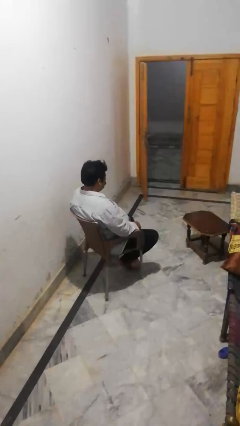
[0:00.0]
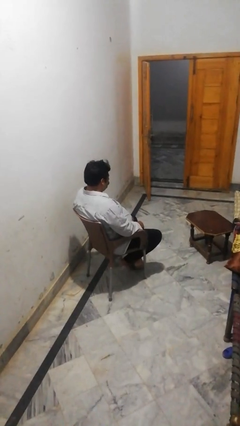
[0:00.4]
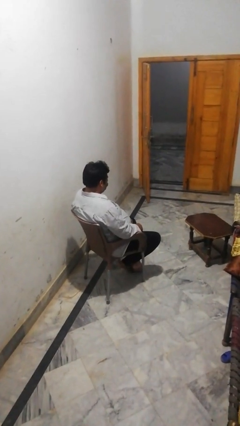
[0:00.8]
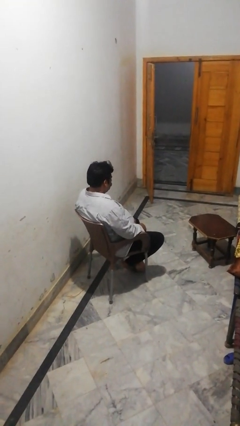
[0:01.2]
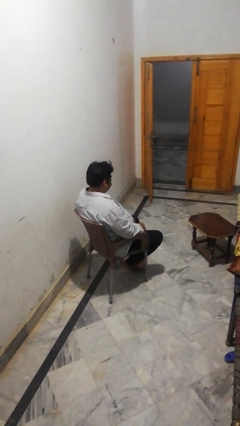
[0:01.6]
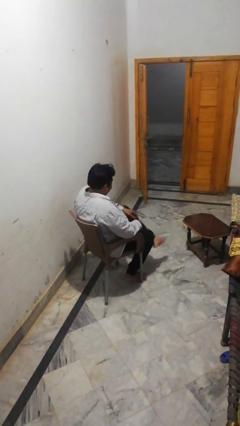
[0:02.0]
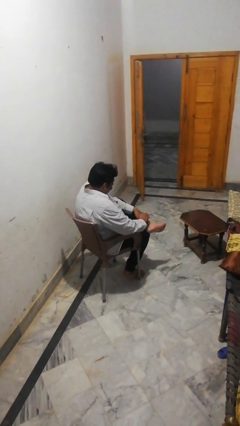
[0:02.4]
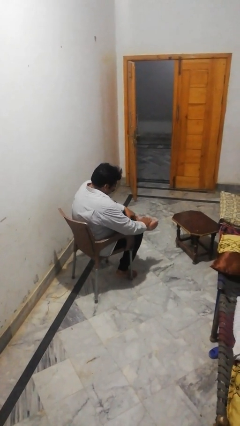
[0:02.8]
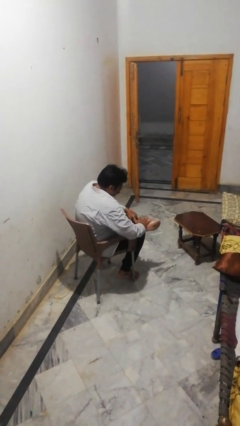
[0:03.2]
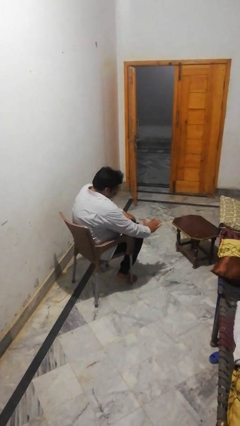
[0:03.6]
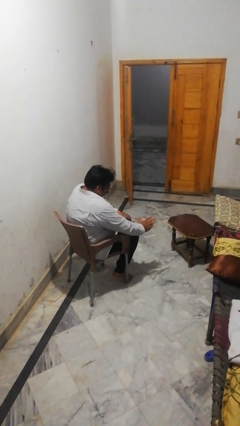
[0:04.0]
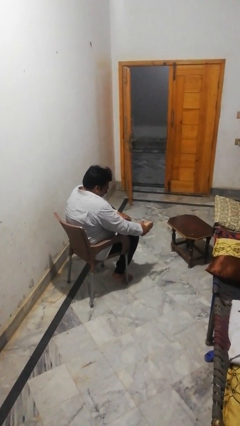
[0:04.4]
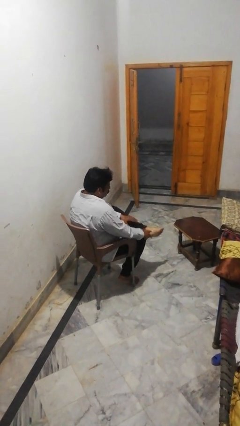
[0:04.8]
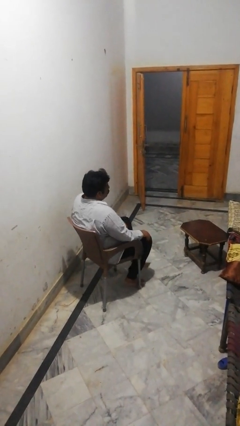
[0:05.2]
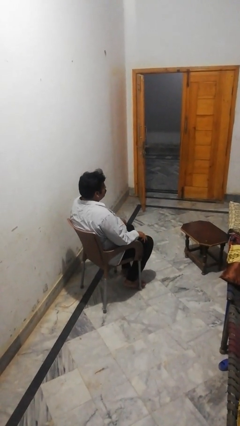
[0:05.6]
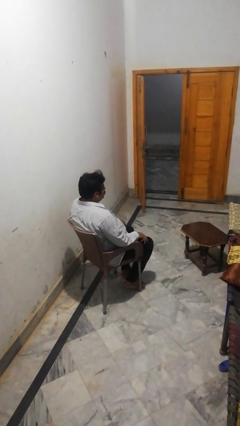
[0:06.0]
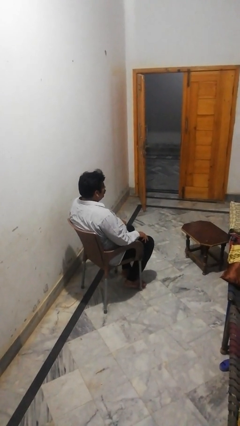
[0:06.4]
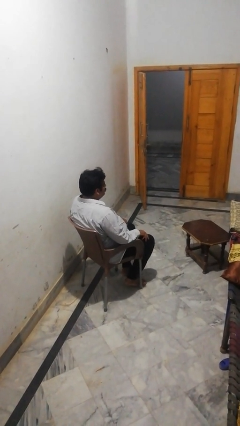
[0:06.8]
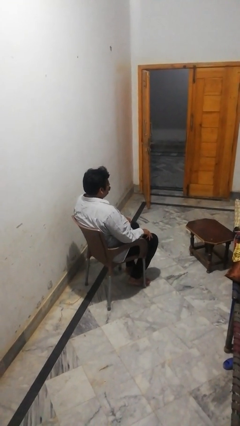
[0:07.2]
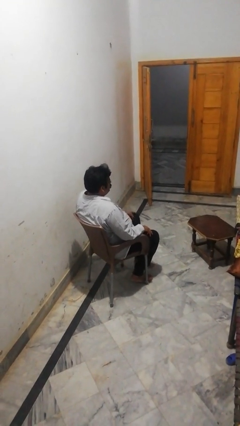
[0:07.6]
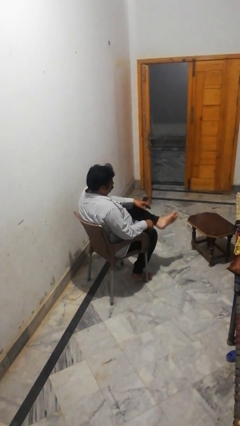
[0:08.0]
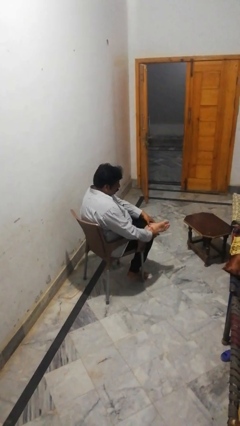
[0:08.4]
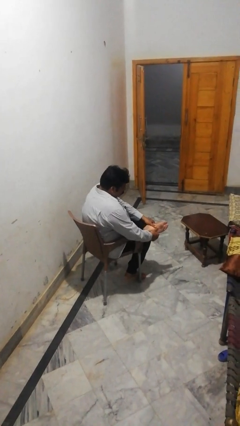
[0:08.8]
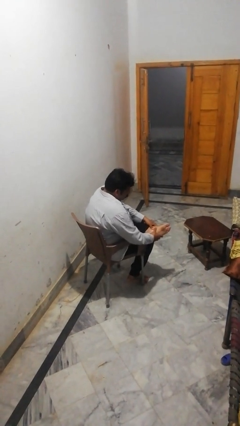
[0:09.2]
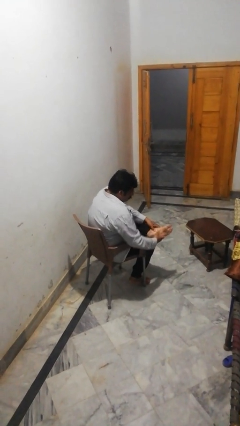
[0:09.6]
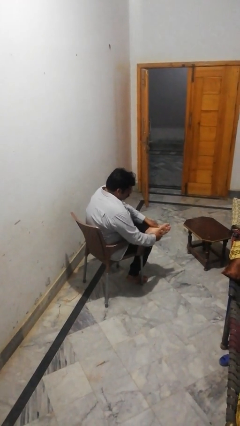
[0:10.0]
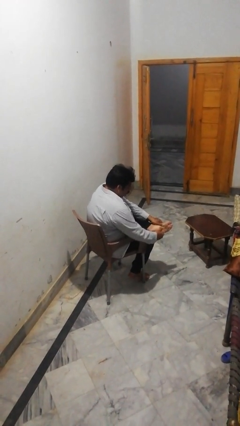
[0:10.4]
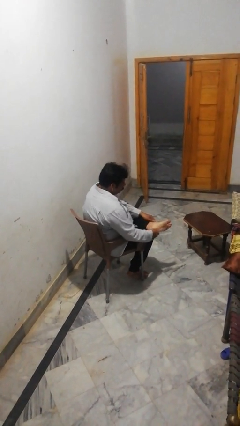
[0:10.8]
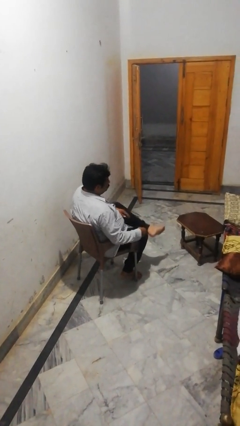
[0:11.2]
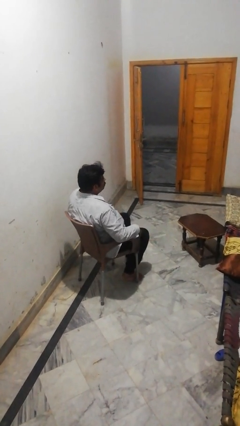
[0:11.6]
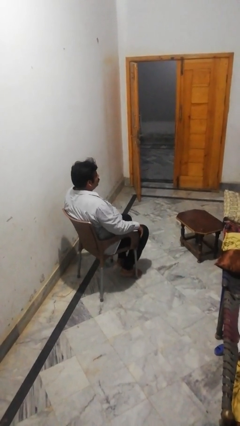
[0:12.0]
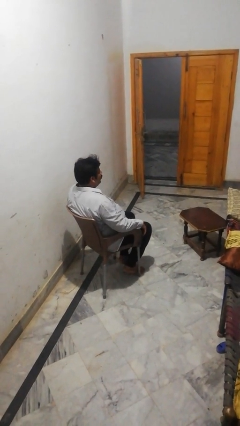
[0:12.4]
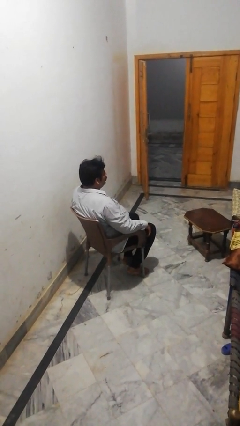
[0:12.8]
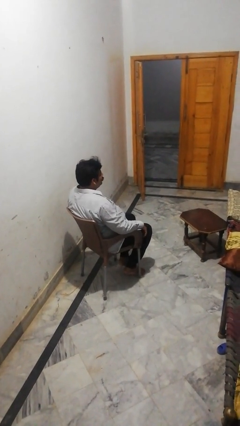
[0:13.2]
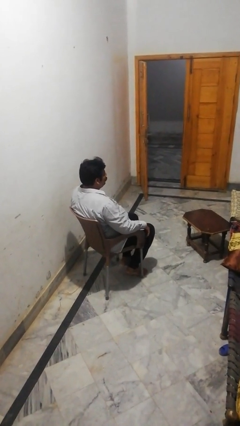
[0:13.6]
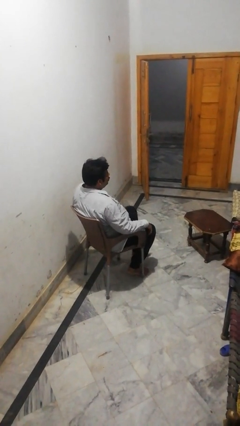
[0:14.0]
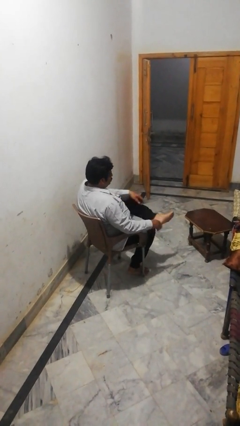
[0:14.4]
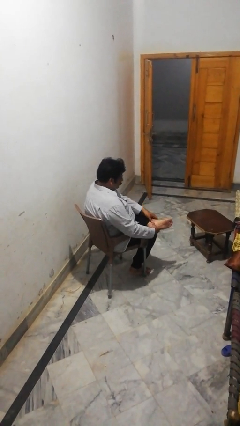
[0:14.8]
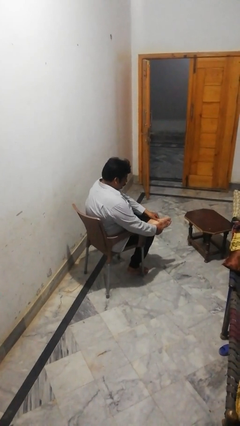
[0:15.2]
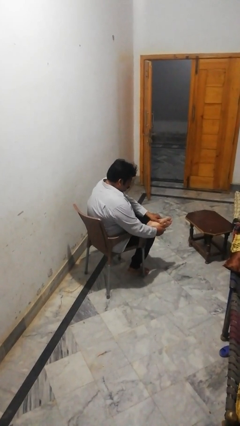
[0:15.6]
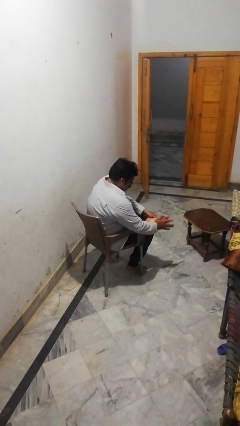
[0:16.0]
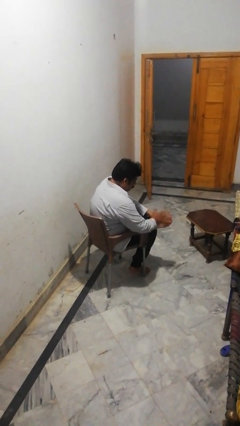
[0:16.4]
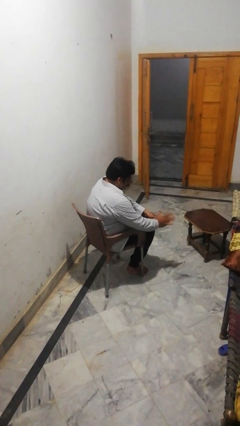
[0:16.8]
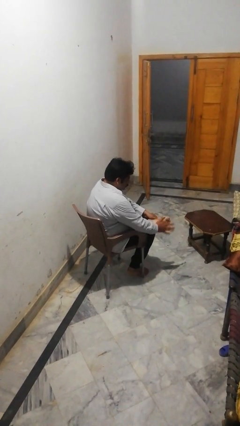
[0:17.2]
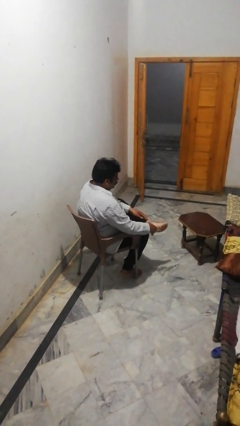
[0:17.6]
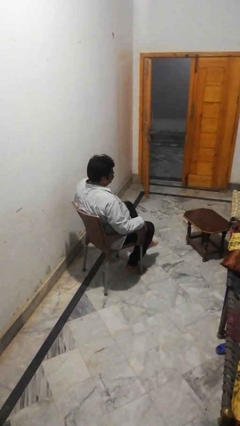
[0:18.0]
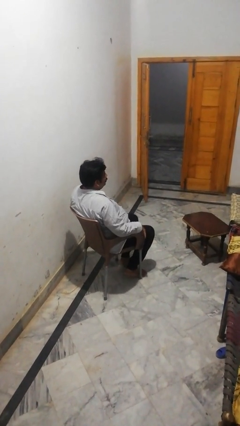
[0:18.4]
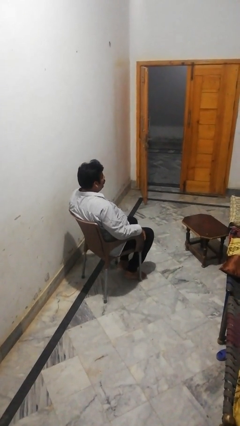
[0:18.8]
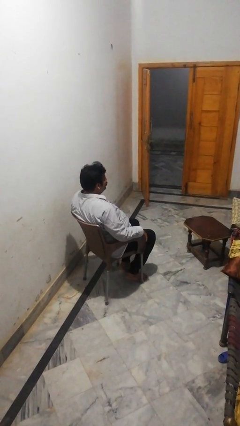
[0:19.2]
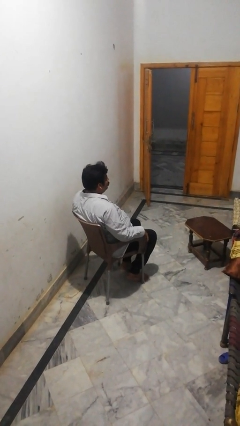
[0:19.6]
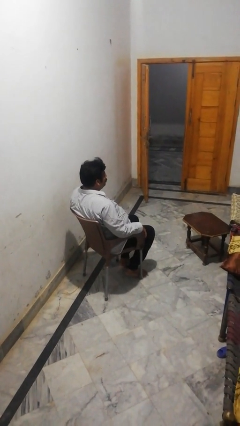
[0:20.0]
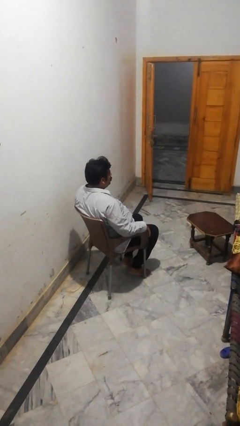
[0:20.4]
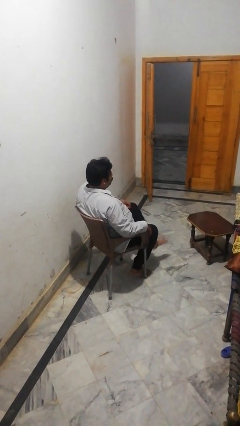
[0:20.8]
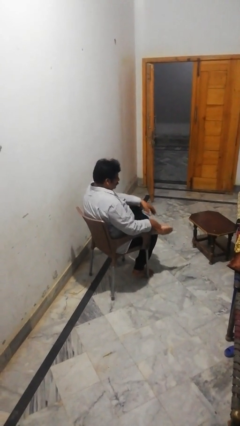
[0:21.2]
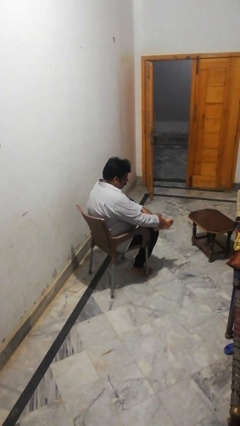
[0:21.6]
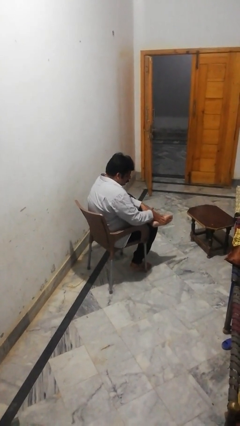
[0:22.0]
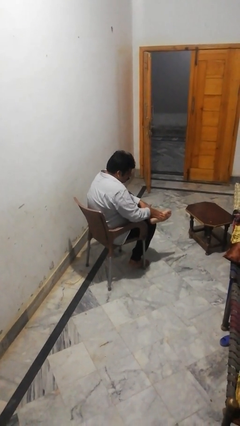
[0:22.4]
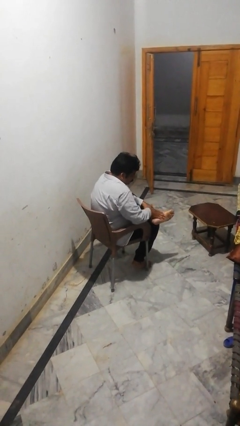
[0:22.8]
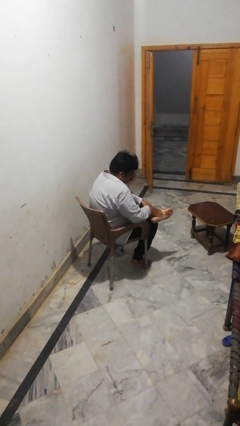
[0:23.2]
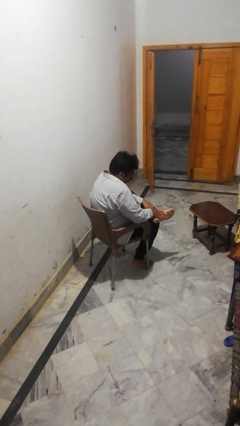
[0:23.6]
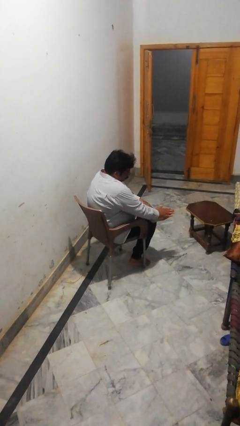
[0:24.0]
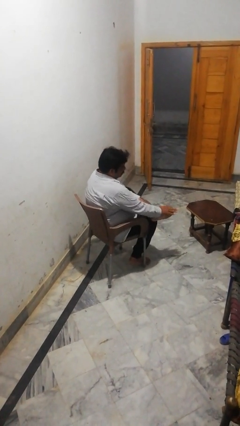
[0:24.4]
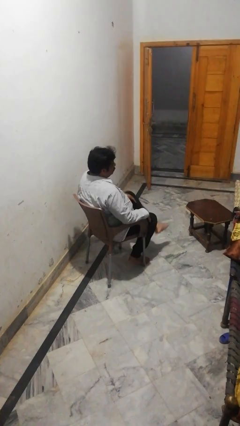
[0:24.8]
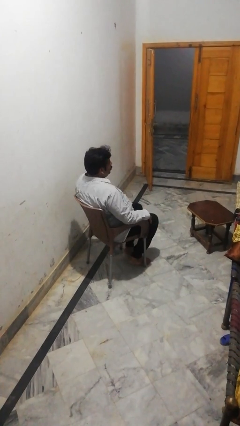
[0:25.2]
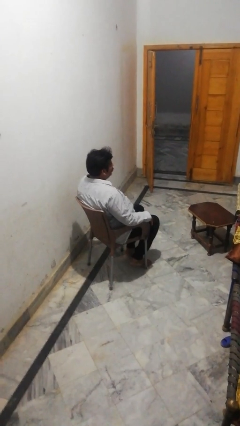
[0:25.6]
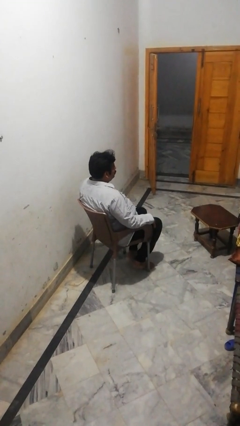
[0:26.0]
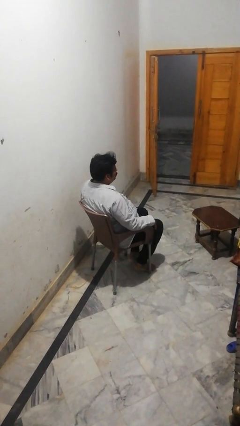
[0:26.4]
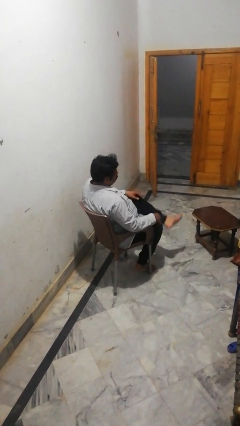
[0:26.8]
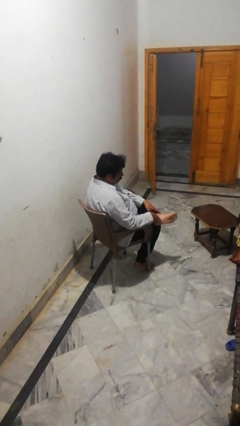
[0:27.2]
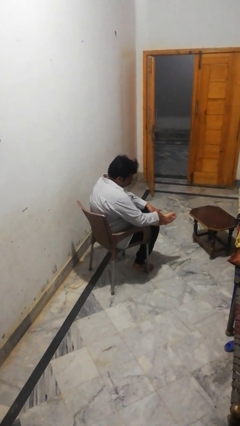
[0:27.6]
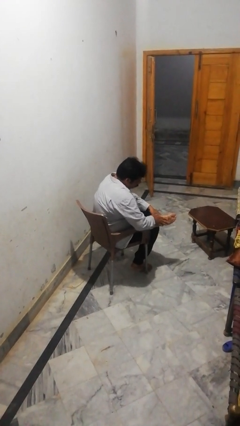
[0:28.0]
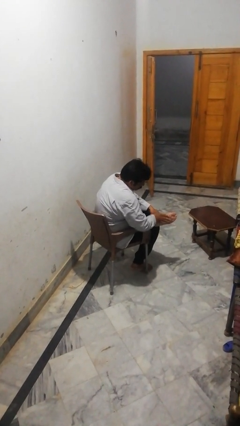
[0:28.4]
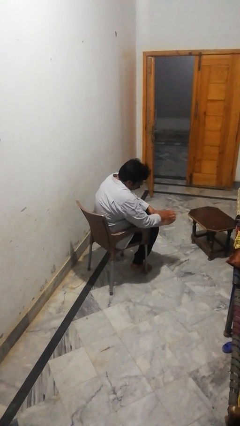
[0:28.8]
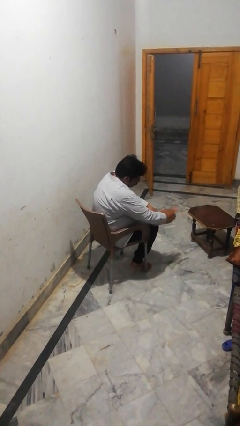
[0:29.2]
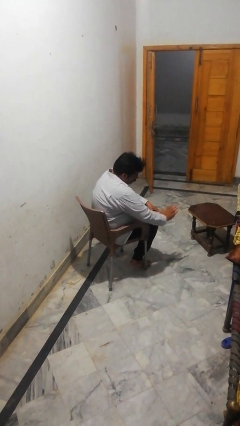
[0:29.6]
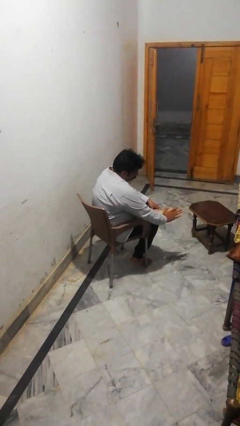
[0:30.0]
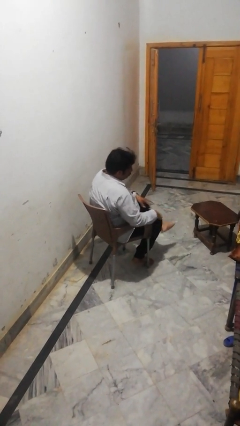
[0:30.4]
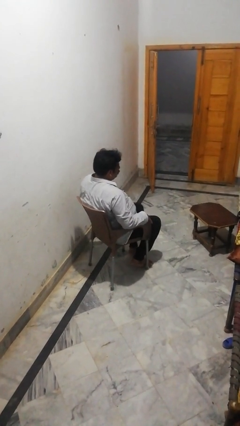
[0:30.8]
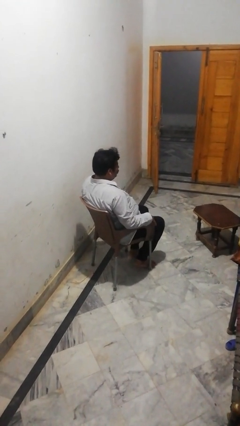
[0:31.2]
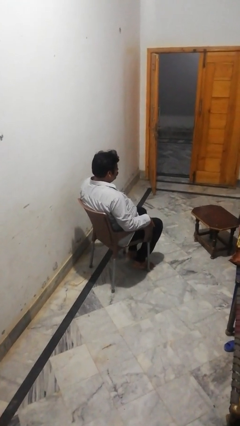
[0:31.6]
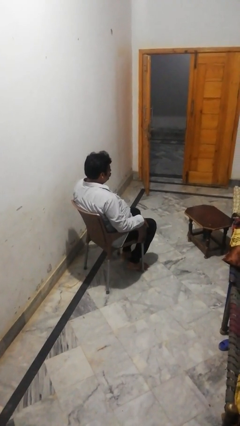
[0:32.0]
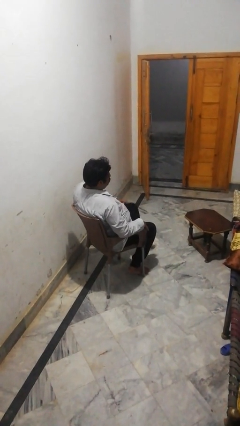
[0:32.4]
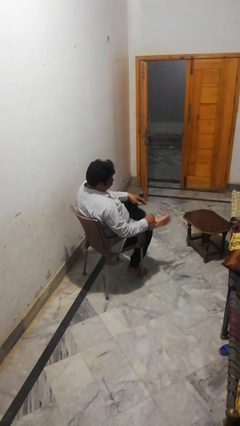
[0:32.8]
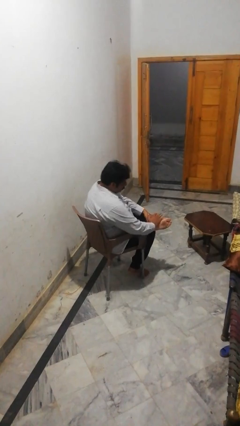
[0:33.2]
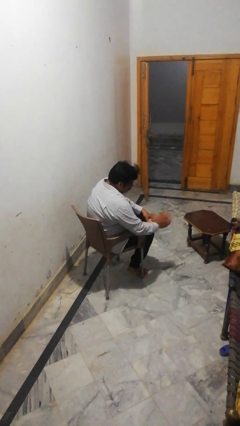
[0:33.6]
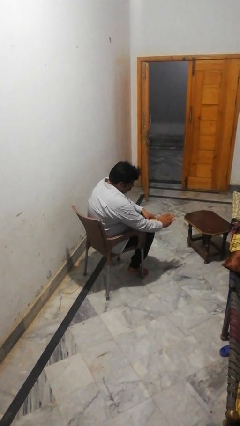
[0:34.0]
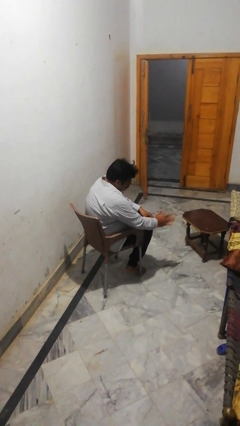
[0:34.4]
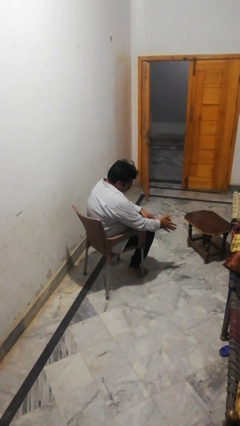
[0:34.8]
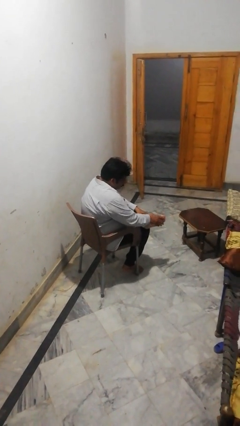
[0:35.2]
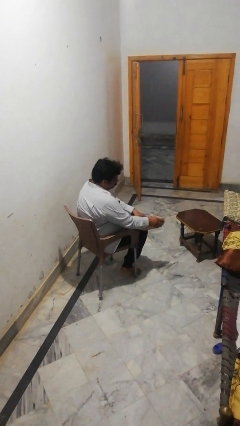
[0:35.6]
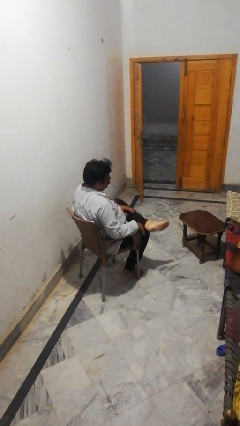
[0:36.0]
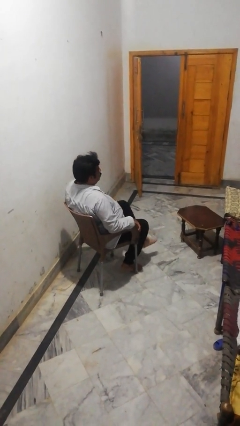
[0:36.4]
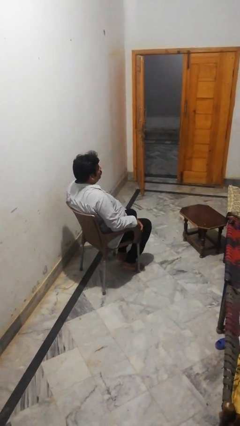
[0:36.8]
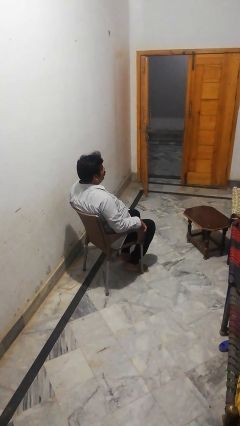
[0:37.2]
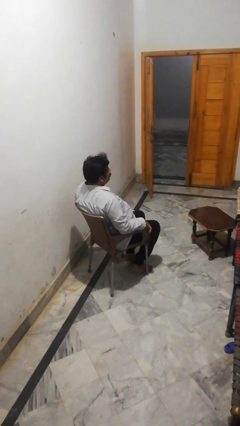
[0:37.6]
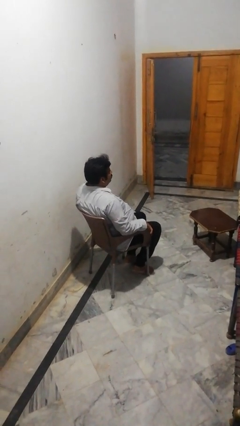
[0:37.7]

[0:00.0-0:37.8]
person rubs foot
